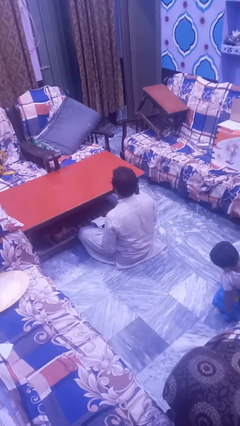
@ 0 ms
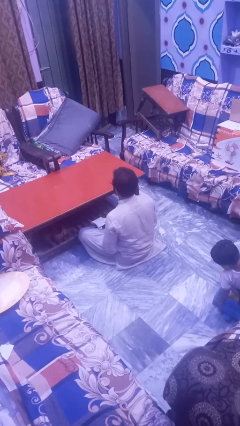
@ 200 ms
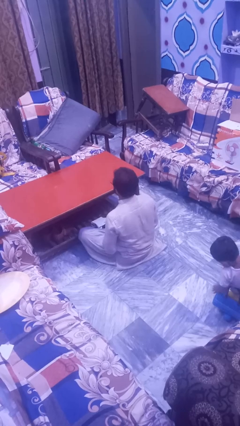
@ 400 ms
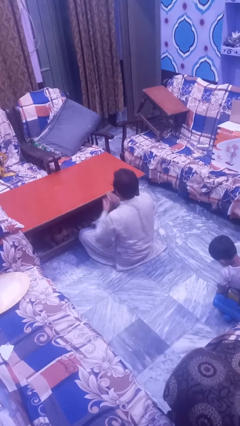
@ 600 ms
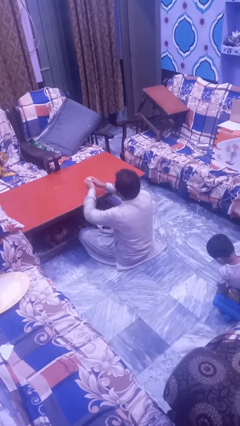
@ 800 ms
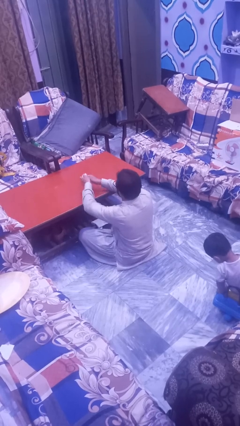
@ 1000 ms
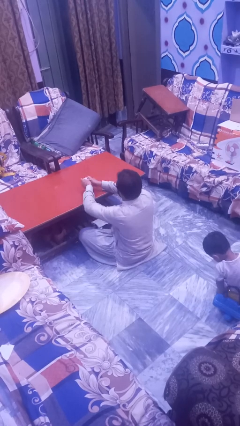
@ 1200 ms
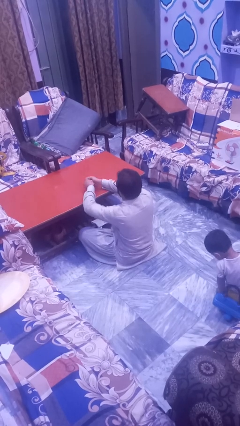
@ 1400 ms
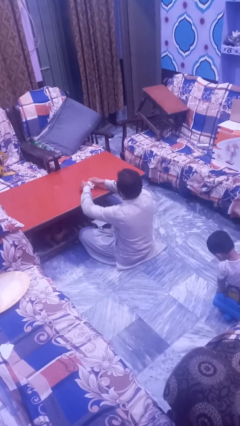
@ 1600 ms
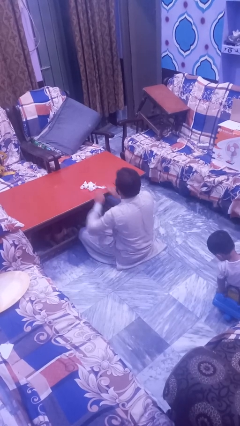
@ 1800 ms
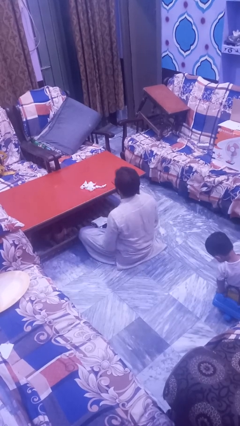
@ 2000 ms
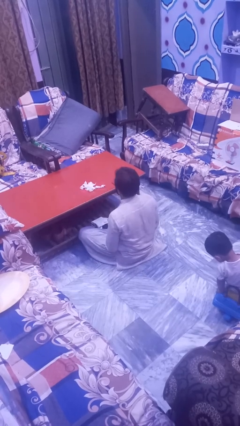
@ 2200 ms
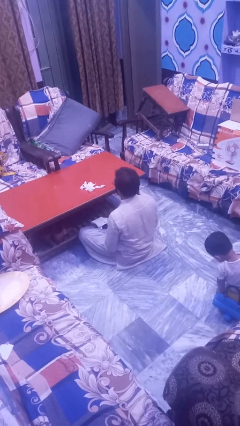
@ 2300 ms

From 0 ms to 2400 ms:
person crumples paper

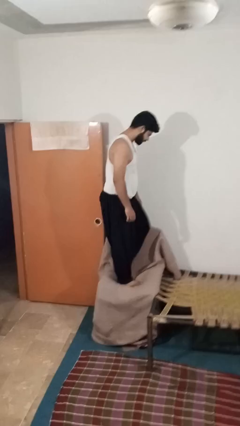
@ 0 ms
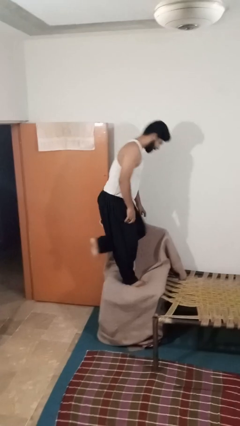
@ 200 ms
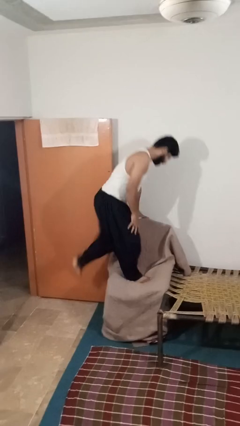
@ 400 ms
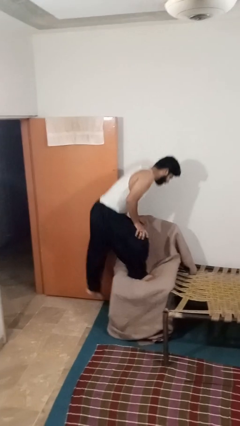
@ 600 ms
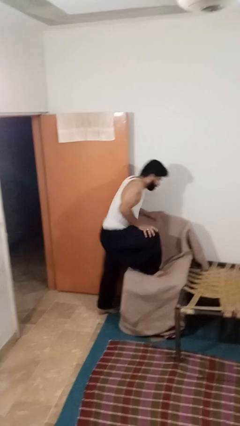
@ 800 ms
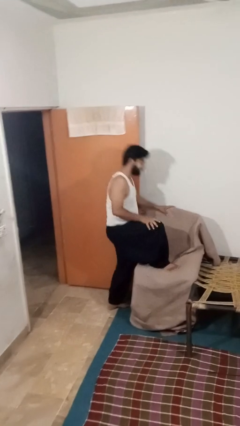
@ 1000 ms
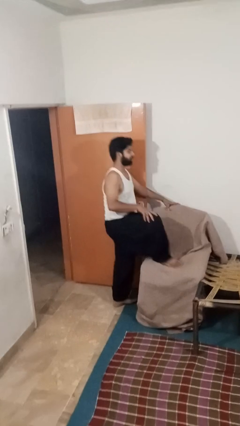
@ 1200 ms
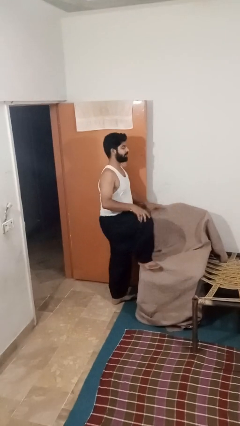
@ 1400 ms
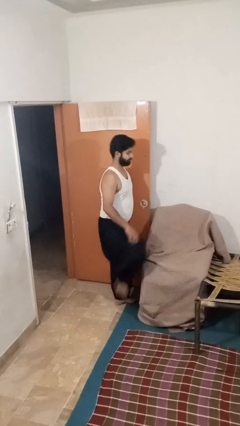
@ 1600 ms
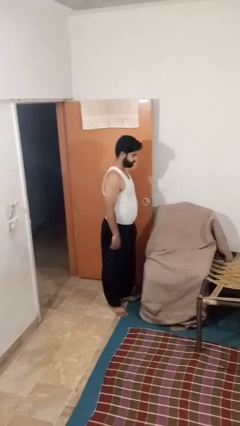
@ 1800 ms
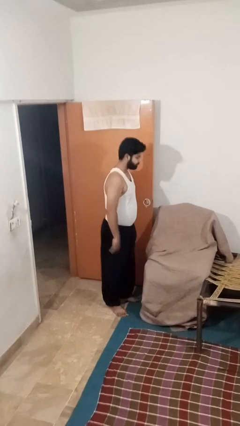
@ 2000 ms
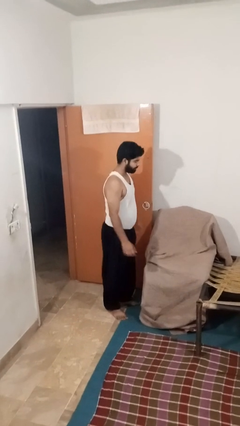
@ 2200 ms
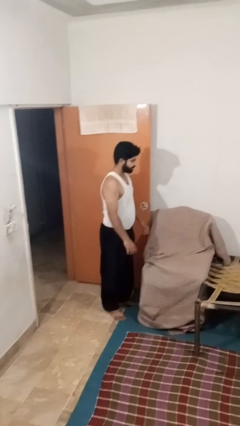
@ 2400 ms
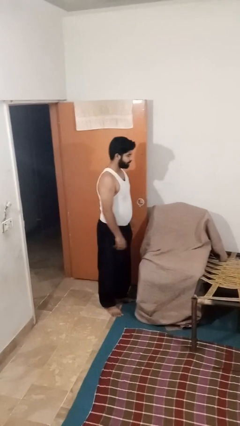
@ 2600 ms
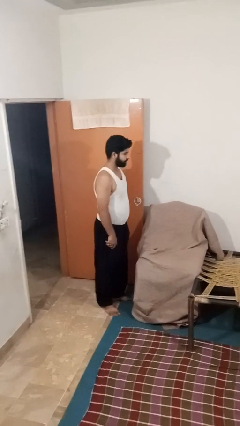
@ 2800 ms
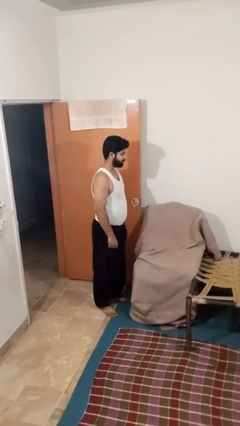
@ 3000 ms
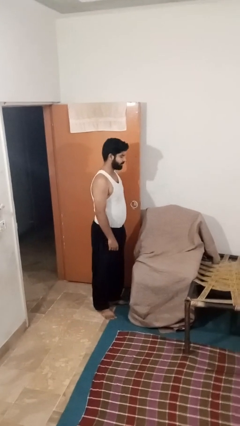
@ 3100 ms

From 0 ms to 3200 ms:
person climbs off couch

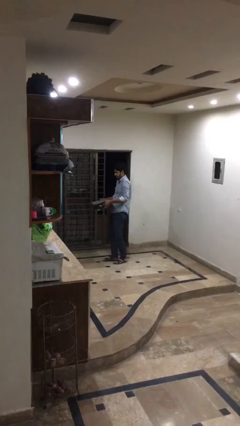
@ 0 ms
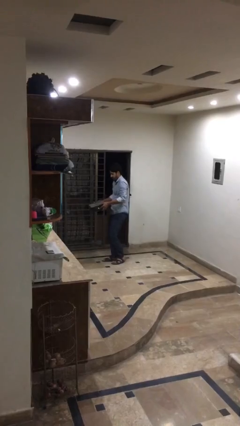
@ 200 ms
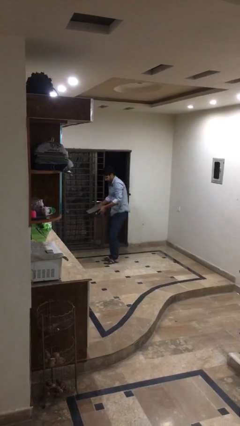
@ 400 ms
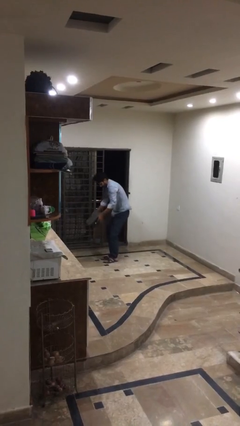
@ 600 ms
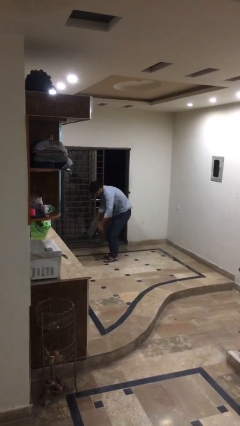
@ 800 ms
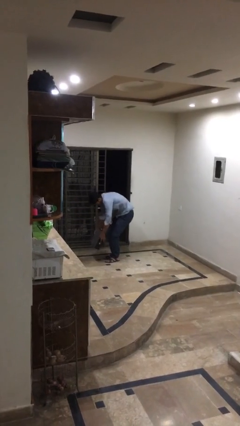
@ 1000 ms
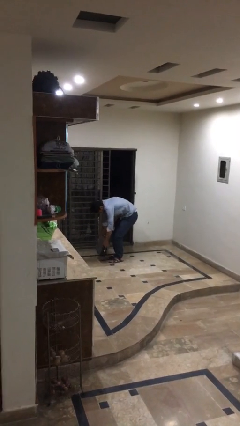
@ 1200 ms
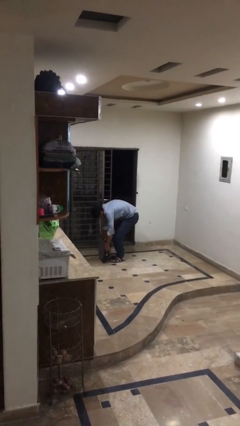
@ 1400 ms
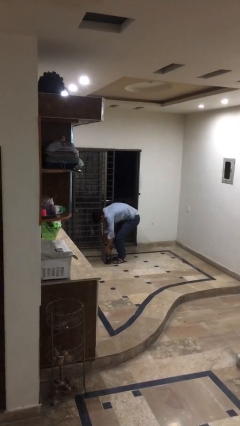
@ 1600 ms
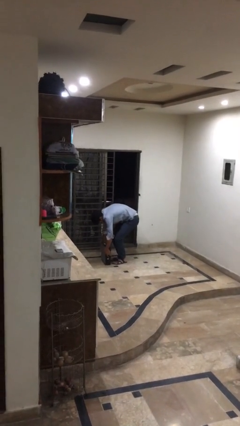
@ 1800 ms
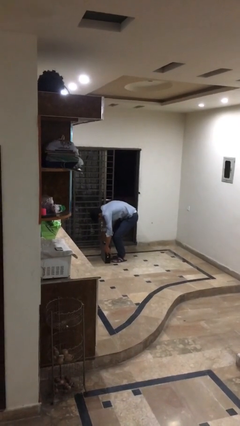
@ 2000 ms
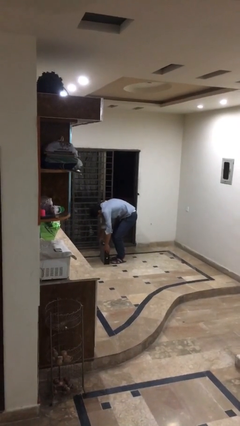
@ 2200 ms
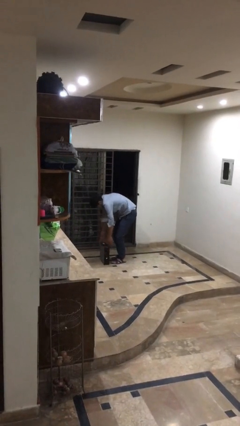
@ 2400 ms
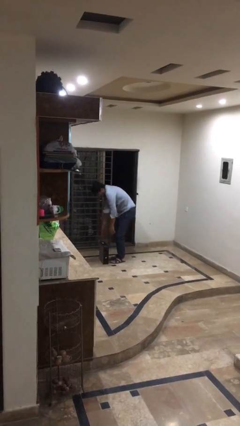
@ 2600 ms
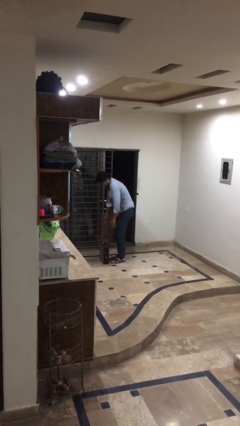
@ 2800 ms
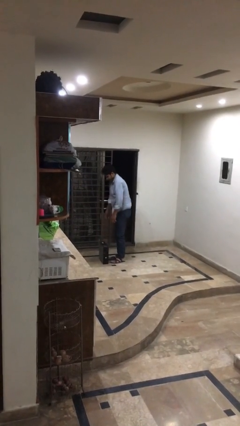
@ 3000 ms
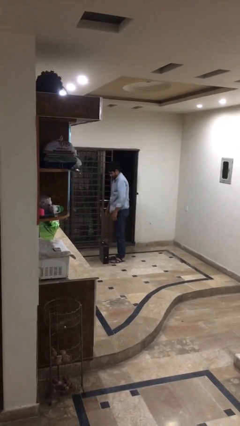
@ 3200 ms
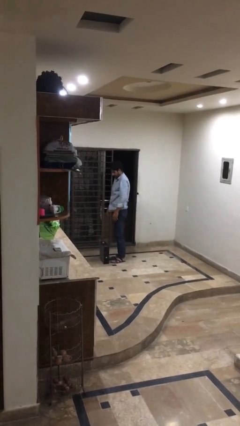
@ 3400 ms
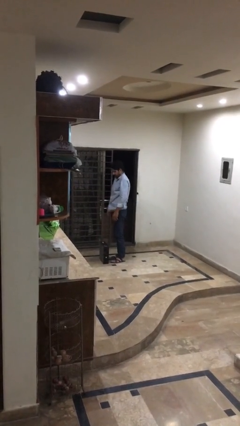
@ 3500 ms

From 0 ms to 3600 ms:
person puts down object on floor

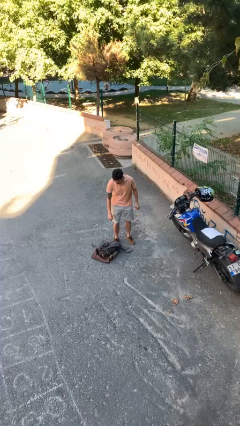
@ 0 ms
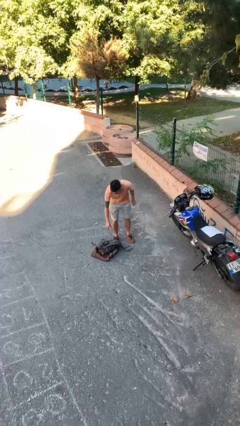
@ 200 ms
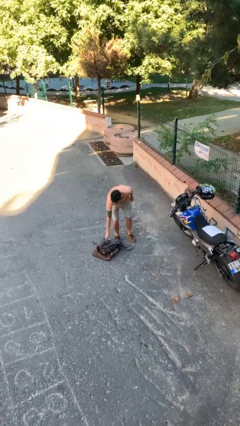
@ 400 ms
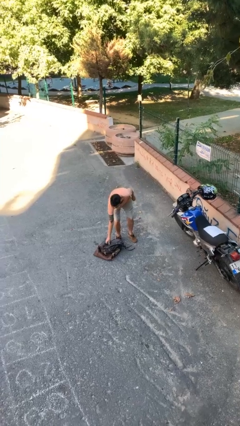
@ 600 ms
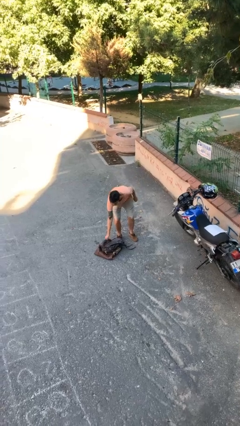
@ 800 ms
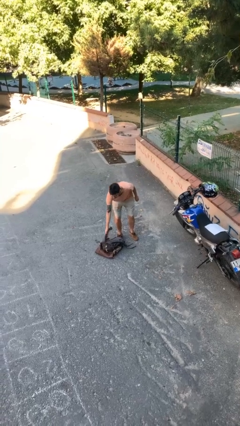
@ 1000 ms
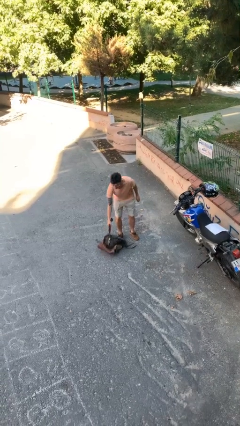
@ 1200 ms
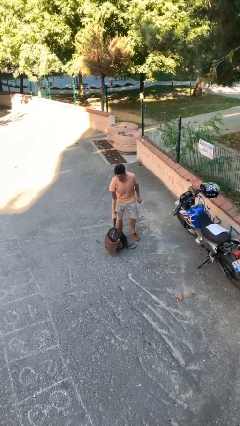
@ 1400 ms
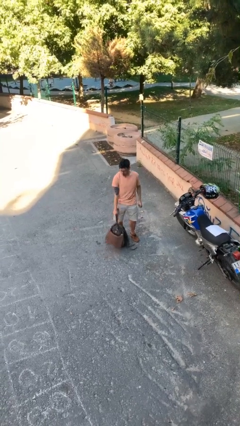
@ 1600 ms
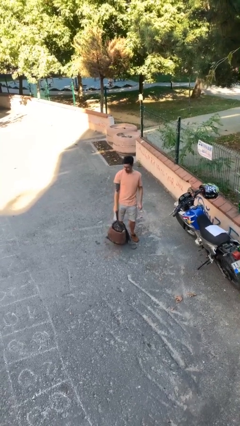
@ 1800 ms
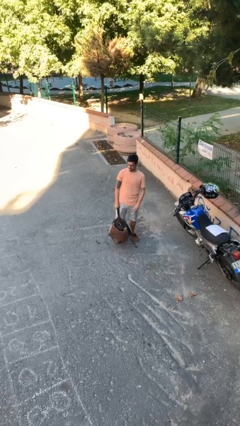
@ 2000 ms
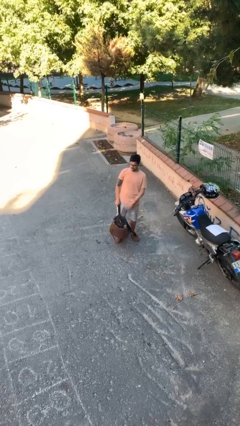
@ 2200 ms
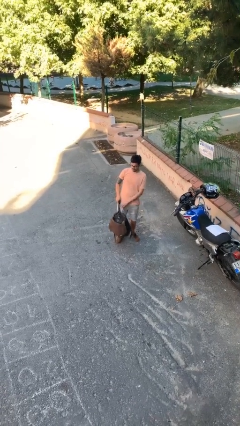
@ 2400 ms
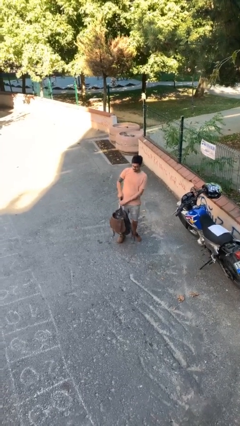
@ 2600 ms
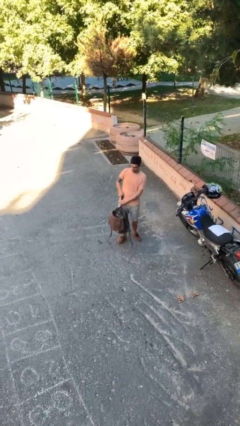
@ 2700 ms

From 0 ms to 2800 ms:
person picks up object from floor

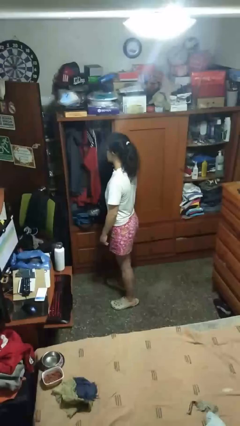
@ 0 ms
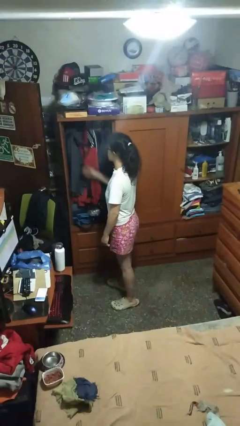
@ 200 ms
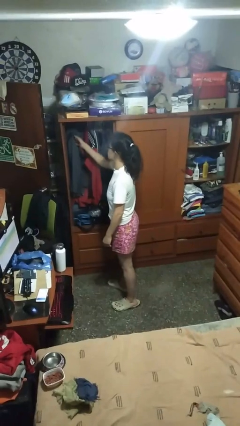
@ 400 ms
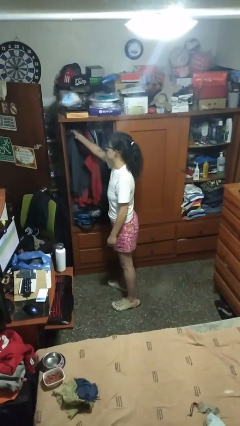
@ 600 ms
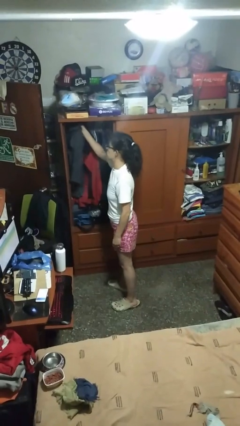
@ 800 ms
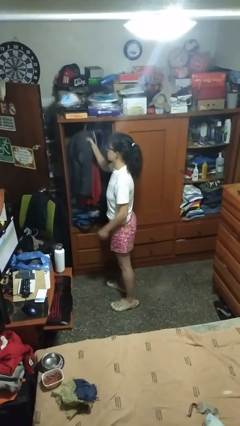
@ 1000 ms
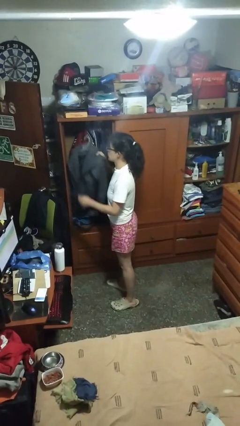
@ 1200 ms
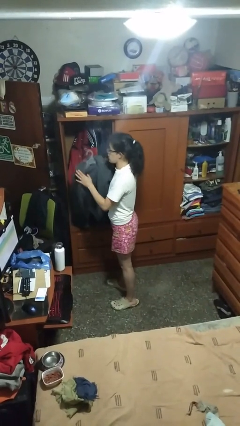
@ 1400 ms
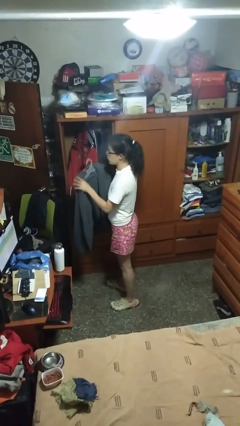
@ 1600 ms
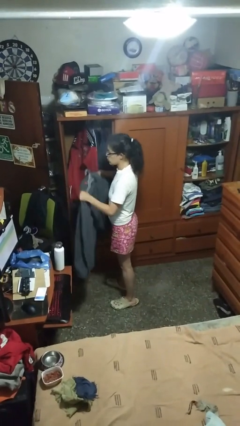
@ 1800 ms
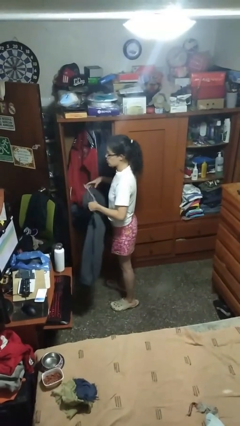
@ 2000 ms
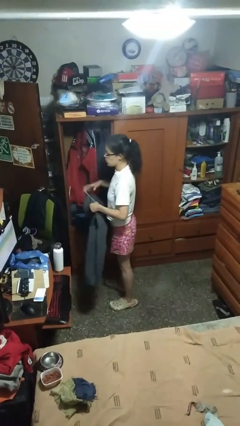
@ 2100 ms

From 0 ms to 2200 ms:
person takes clothes from closet

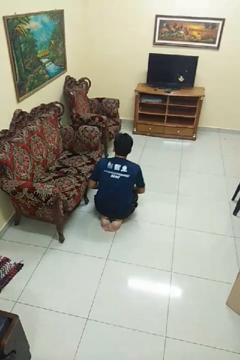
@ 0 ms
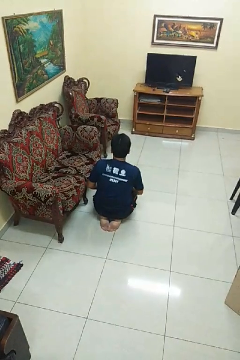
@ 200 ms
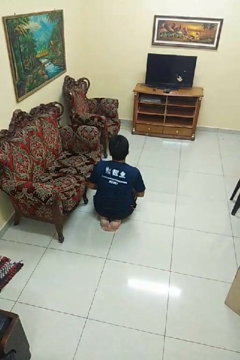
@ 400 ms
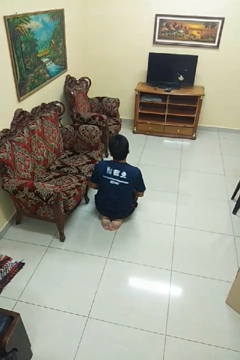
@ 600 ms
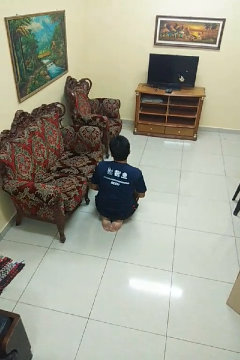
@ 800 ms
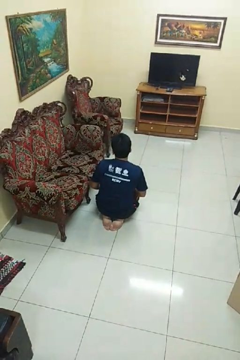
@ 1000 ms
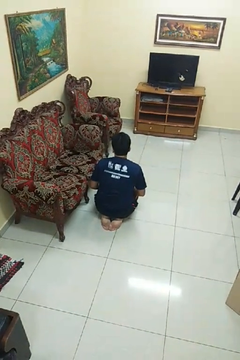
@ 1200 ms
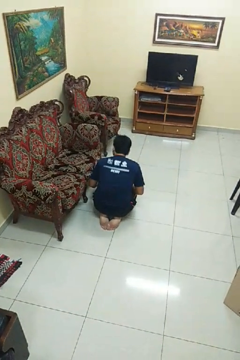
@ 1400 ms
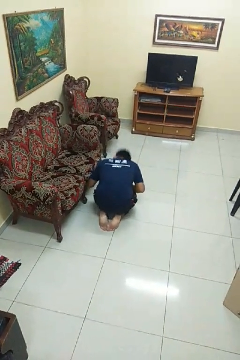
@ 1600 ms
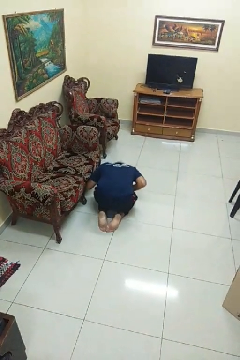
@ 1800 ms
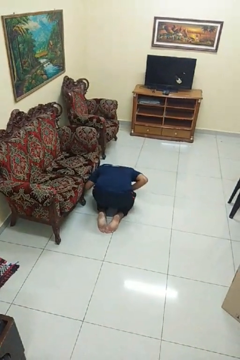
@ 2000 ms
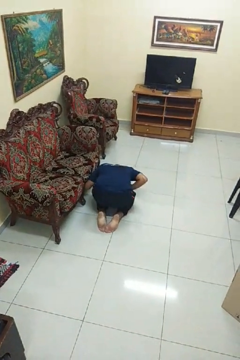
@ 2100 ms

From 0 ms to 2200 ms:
person searches under couch

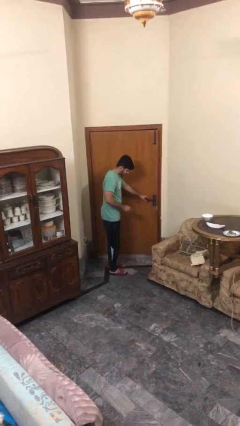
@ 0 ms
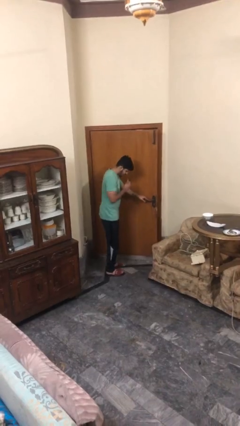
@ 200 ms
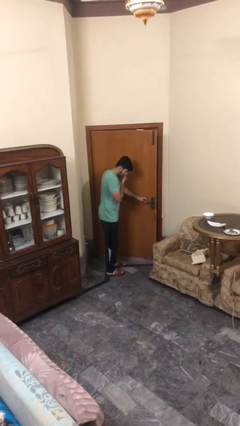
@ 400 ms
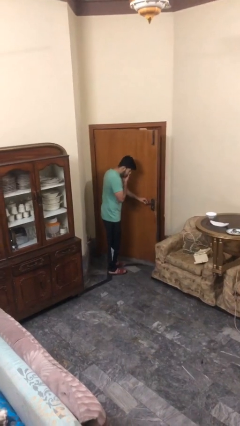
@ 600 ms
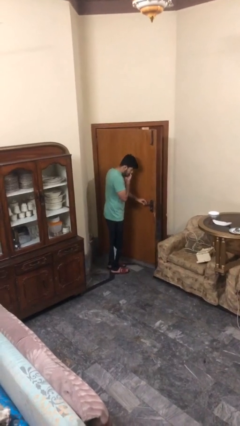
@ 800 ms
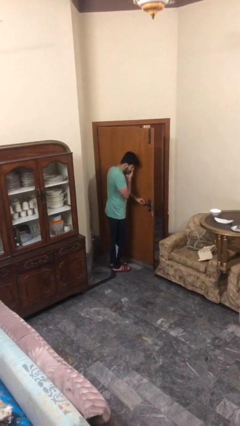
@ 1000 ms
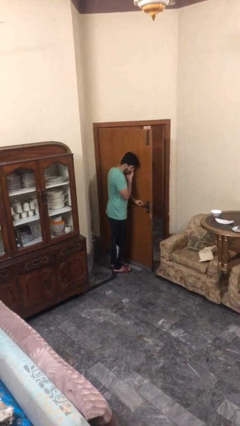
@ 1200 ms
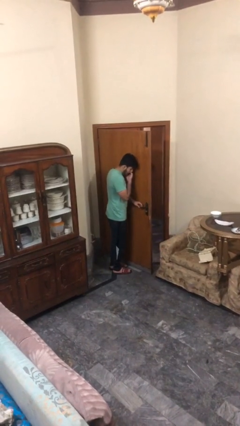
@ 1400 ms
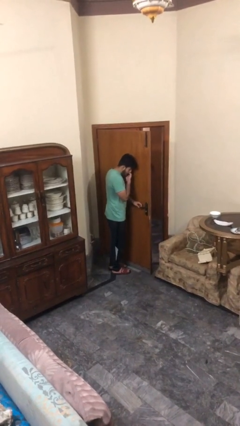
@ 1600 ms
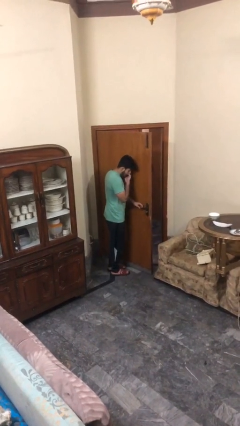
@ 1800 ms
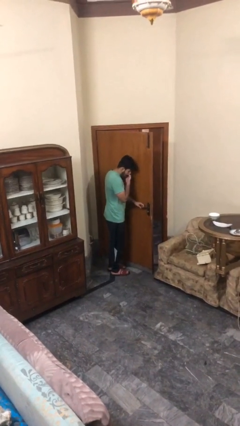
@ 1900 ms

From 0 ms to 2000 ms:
person opens facility door
